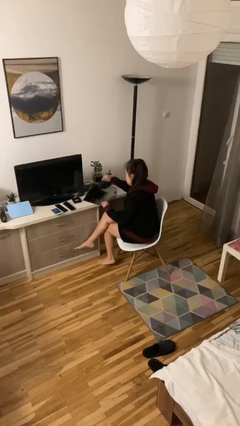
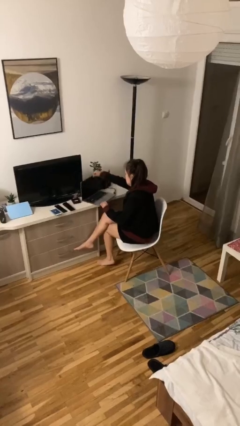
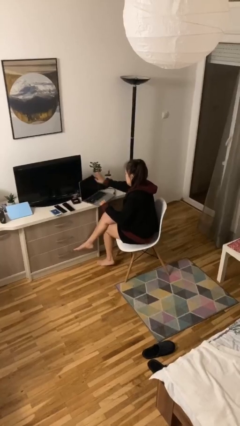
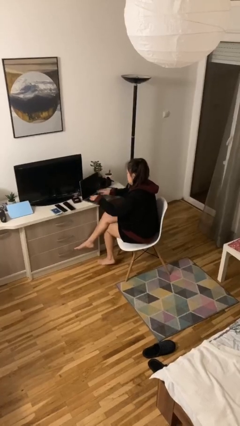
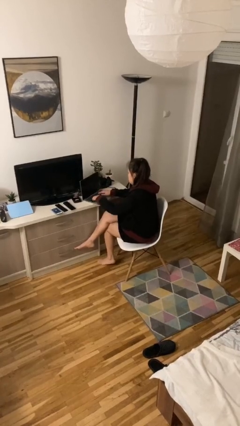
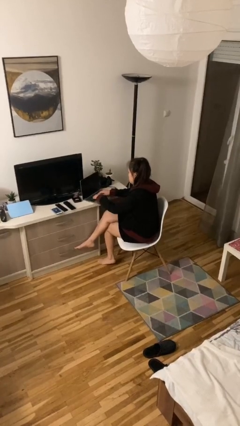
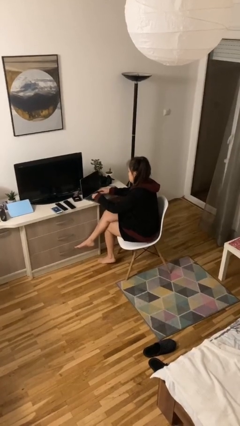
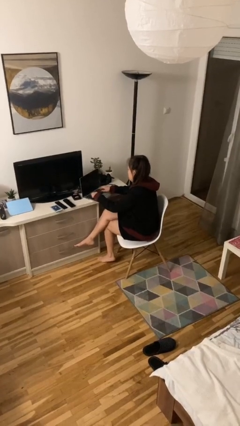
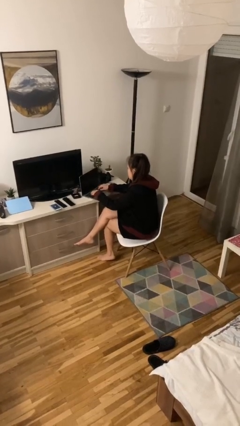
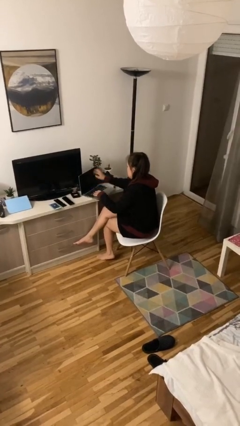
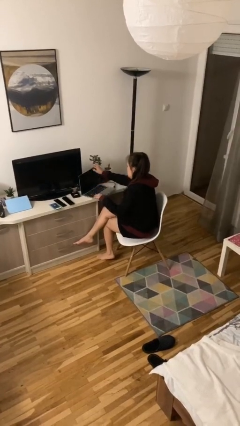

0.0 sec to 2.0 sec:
person interacts with laptop

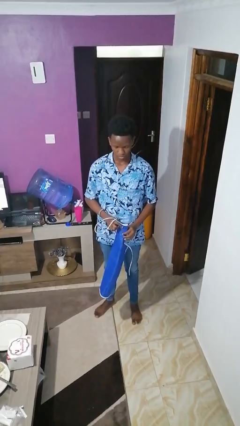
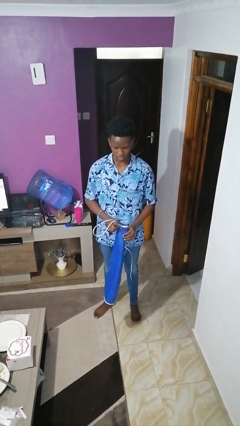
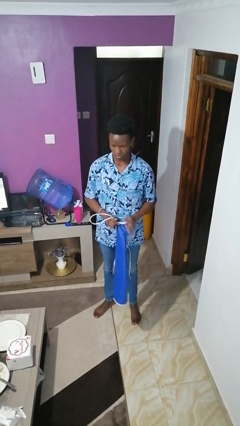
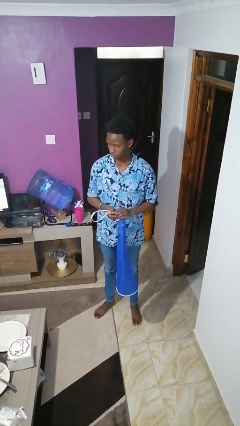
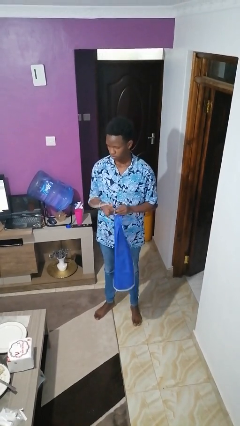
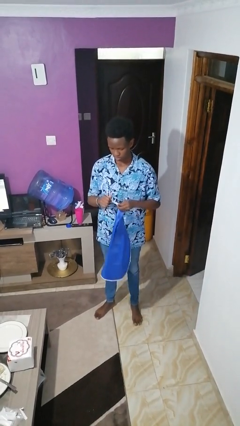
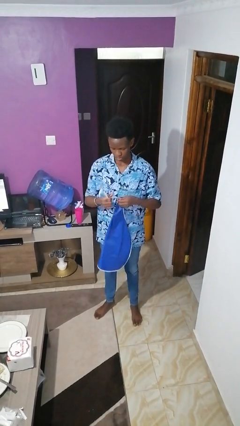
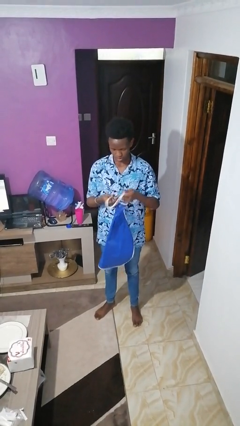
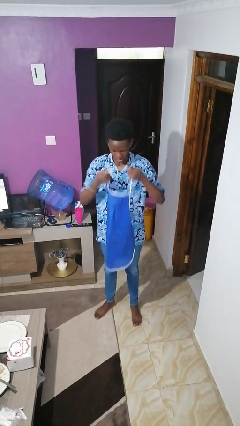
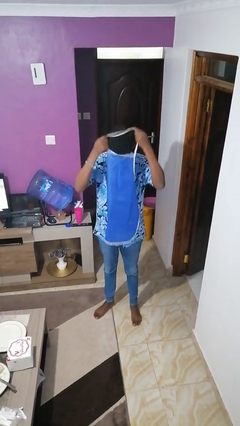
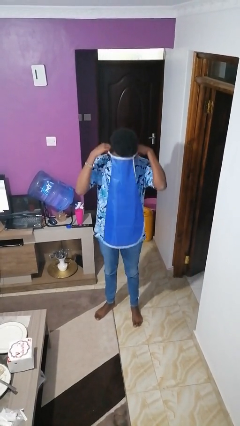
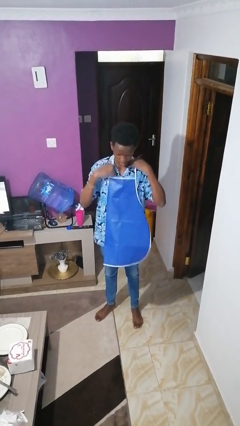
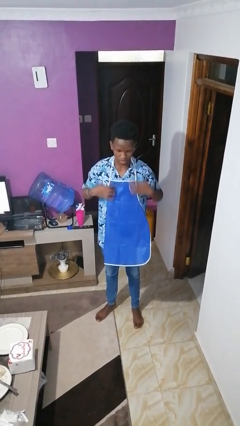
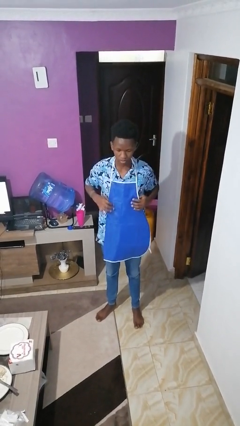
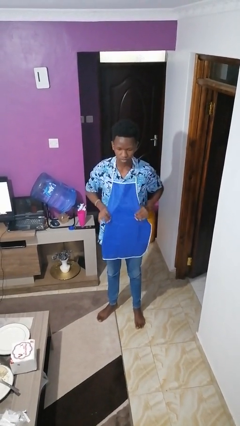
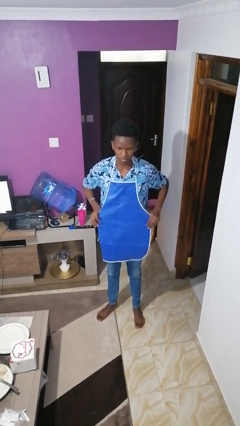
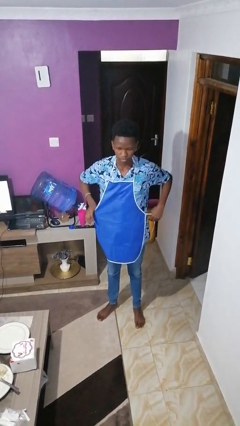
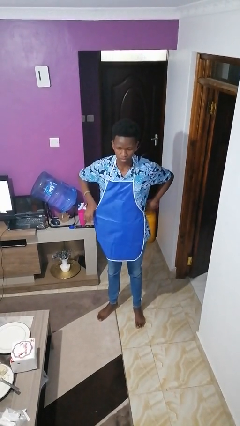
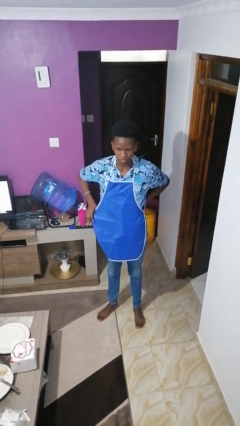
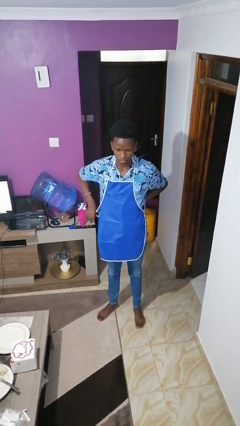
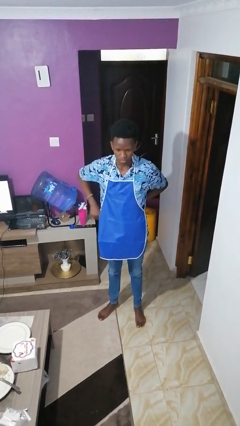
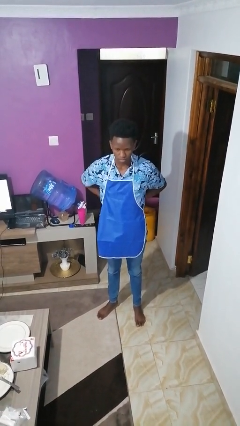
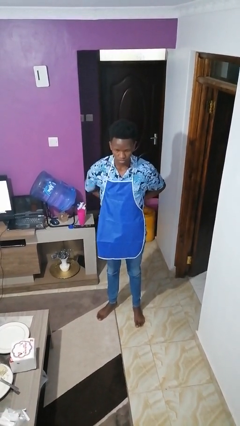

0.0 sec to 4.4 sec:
person puts on apron

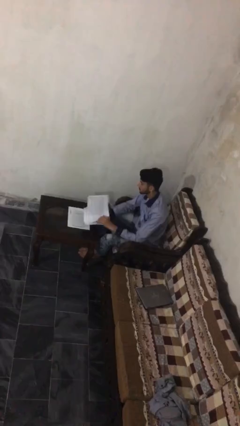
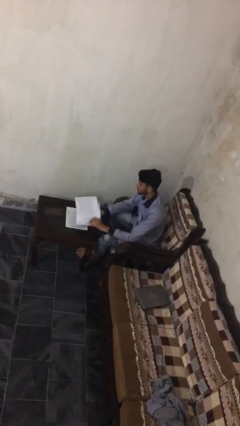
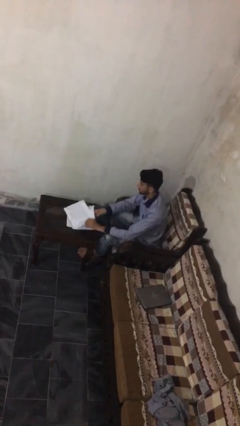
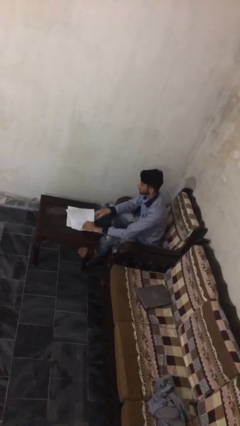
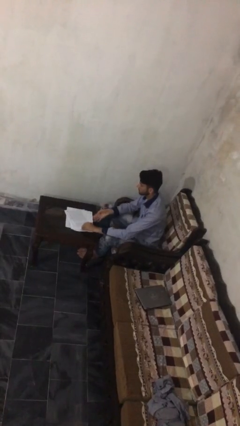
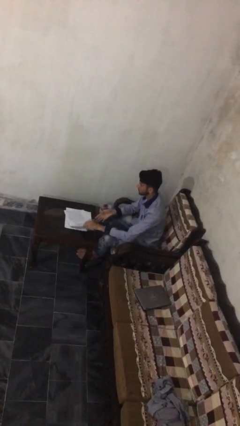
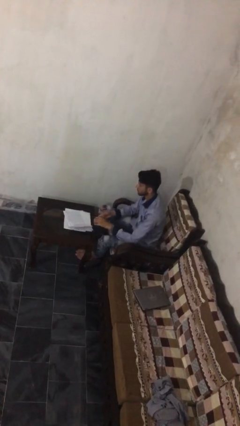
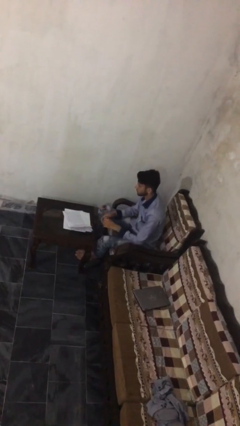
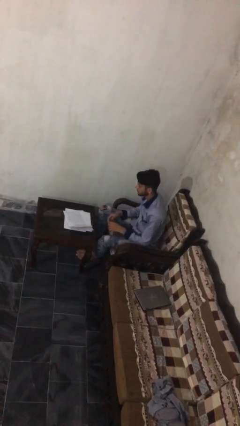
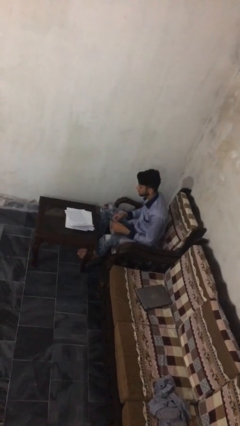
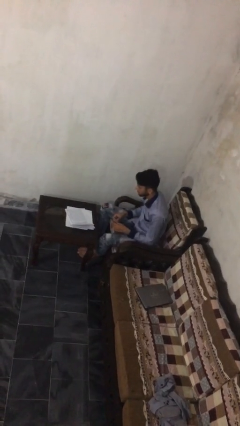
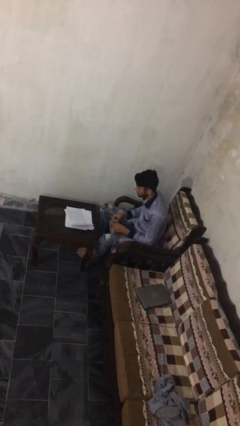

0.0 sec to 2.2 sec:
person puts down object on table

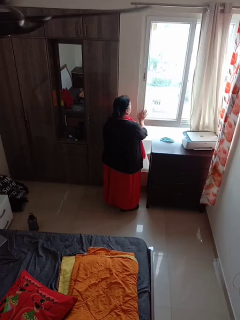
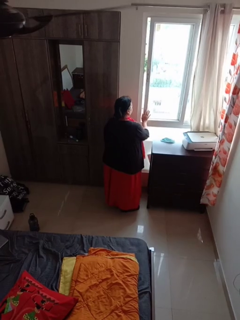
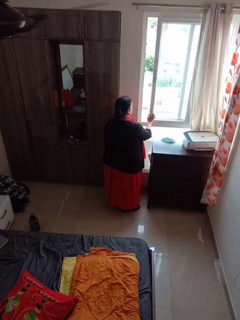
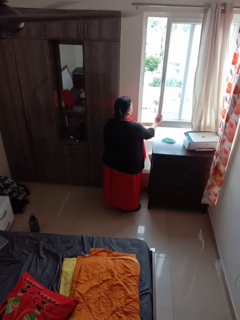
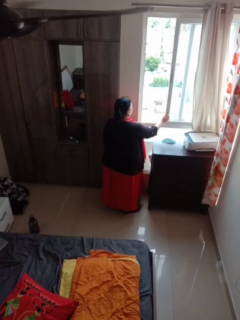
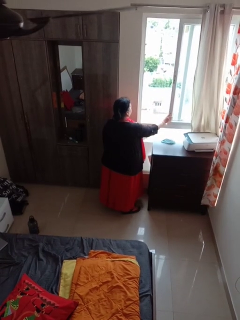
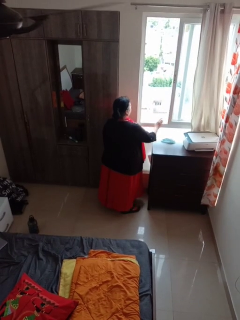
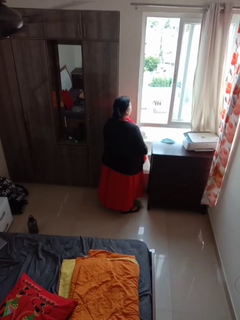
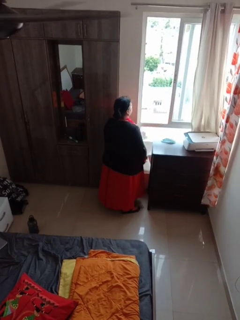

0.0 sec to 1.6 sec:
person opens home window

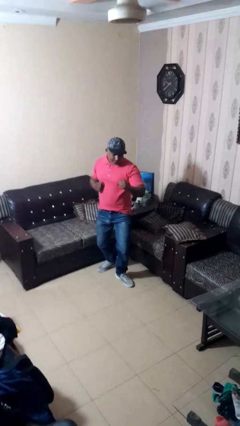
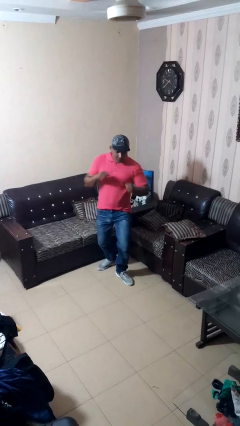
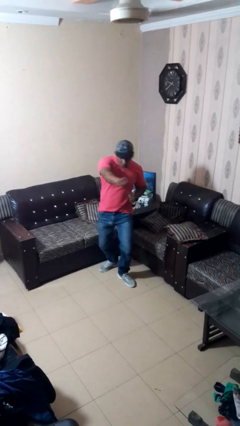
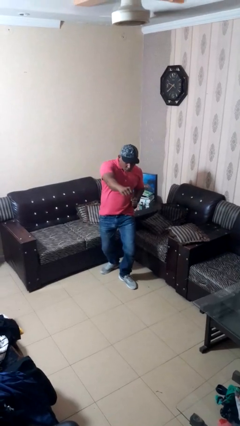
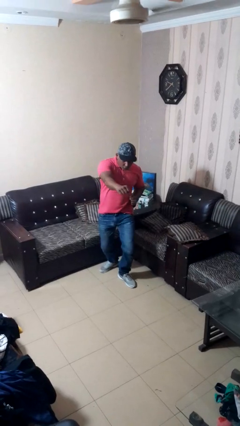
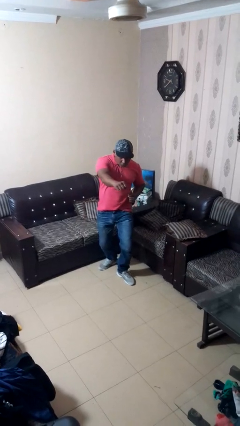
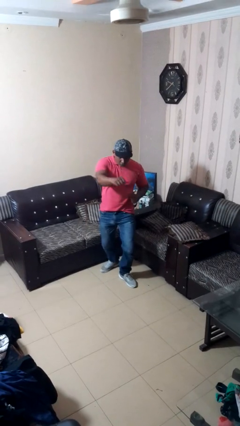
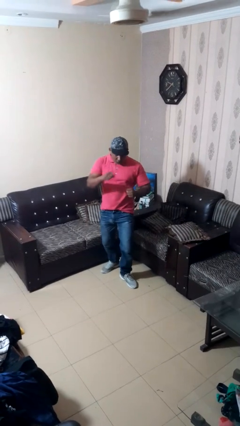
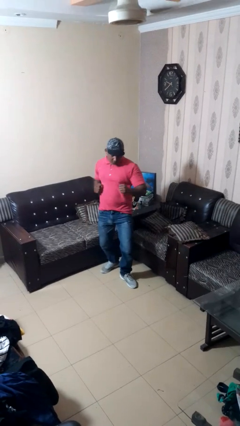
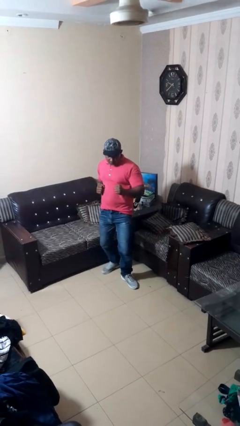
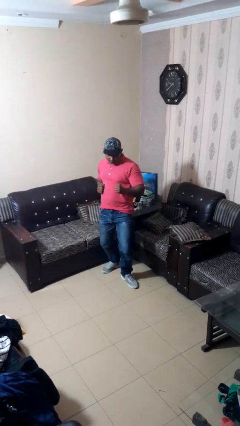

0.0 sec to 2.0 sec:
person karate chop

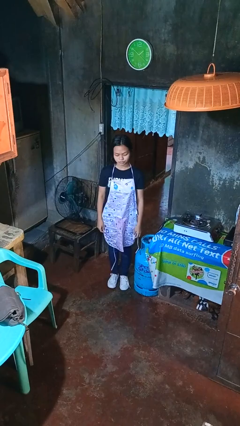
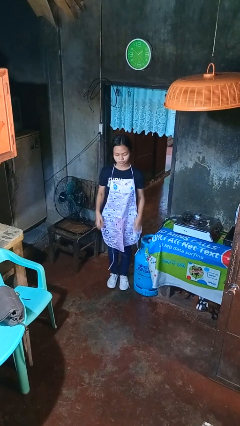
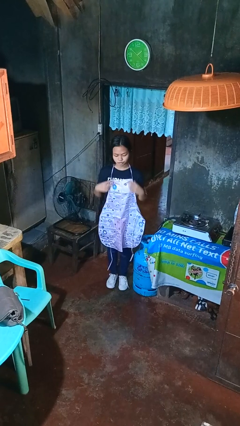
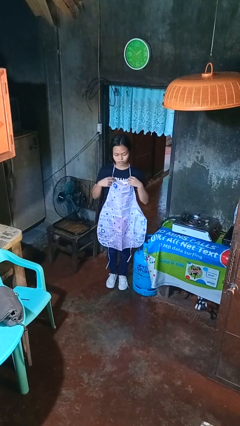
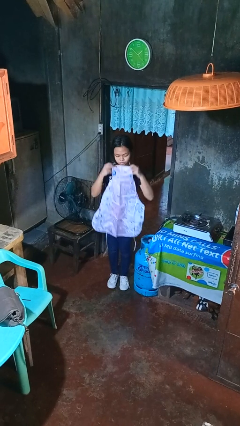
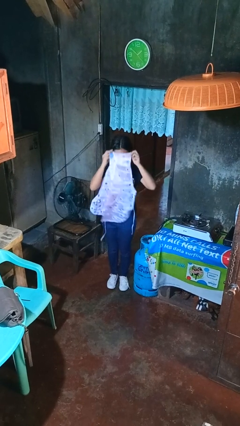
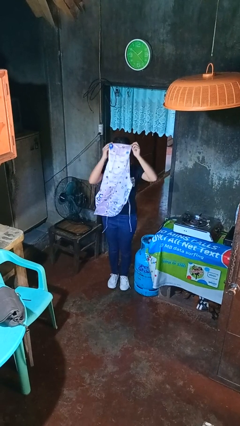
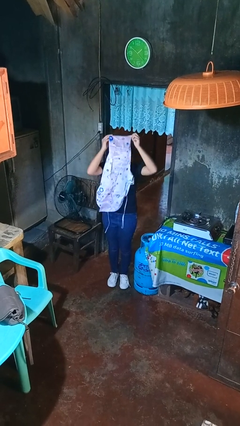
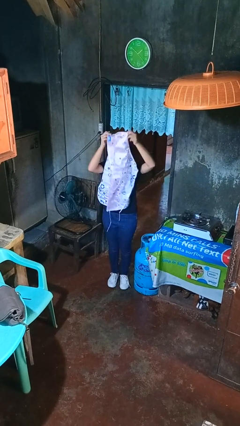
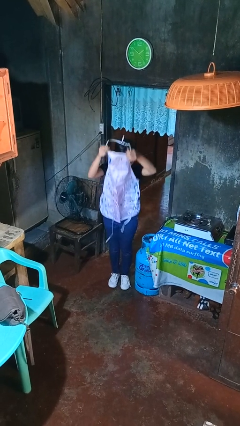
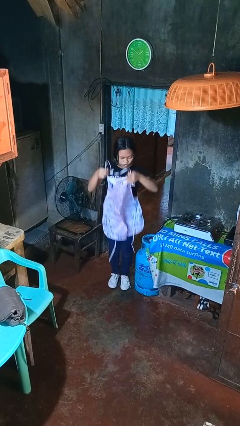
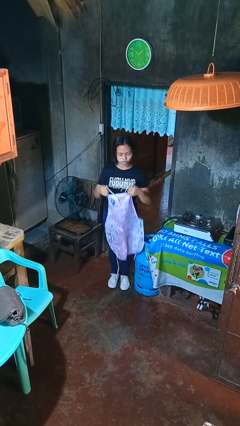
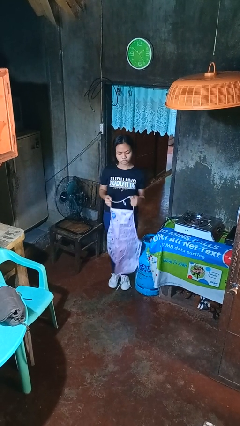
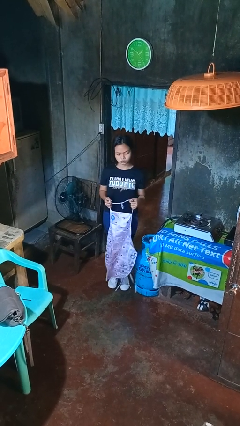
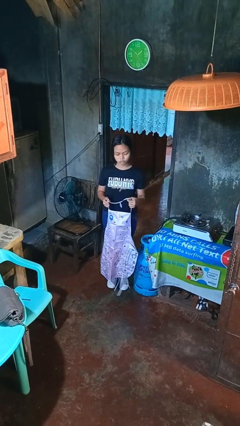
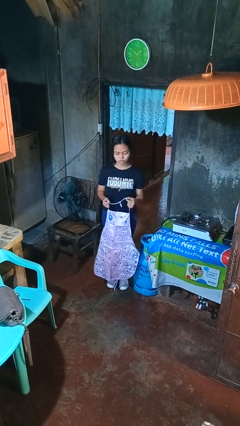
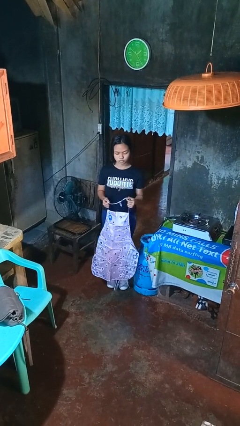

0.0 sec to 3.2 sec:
person takes off apron

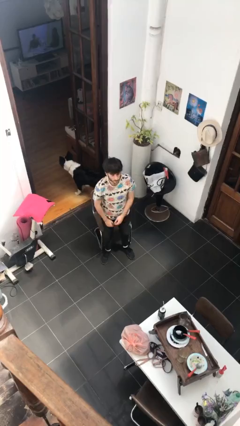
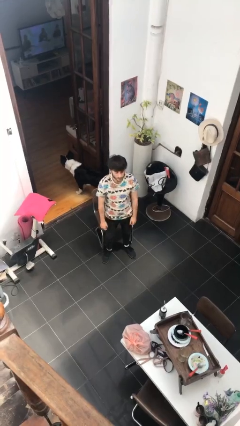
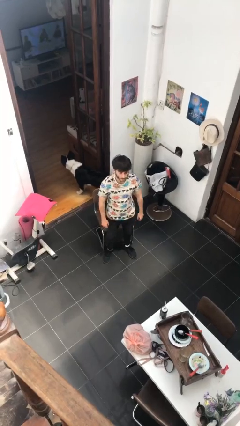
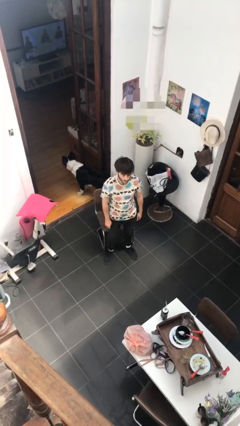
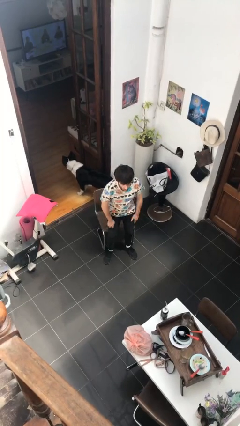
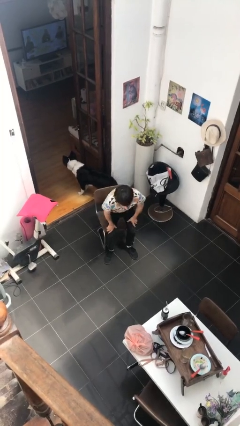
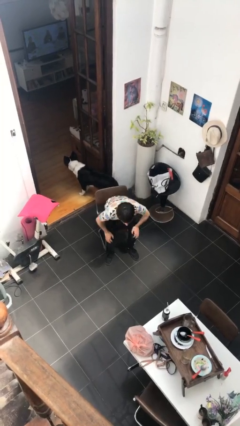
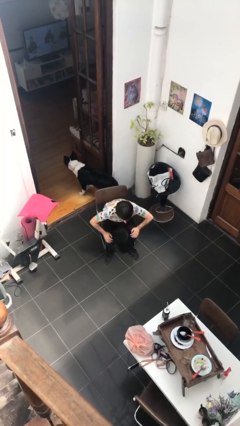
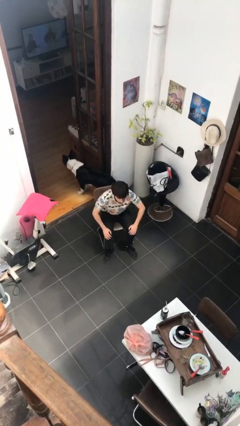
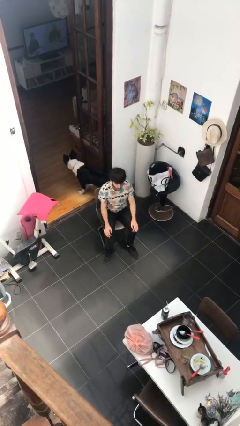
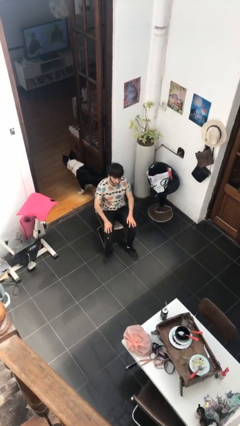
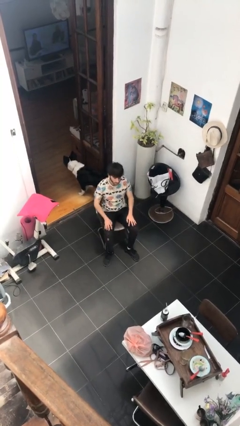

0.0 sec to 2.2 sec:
person sits down
